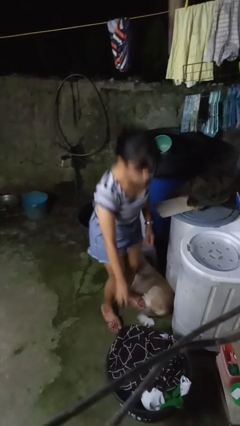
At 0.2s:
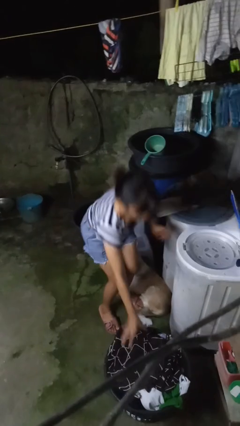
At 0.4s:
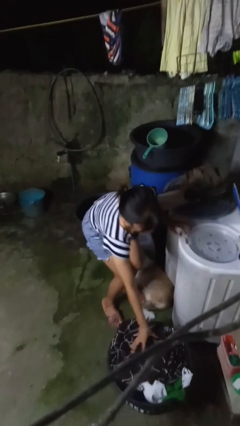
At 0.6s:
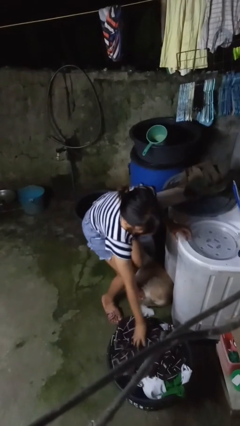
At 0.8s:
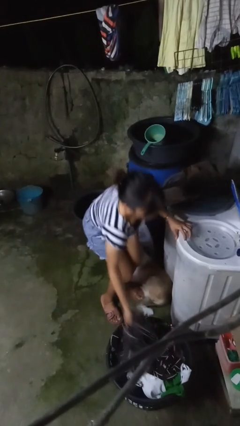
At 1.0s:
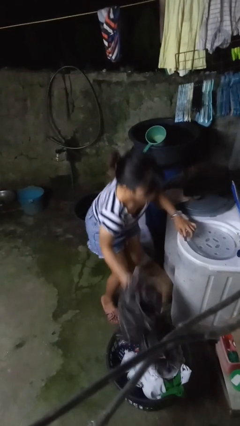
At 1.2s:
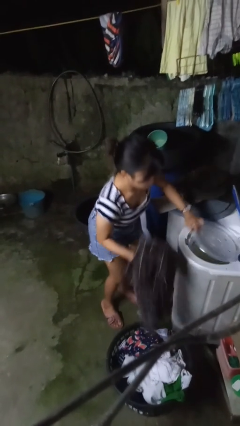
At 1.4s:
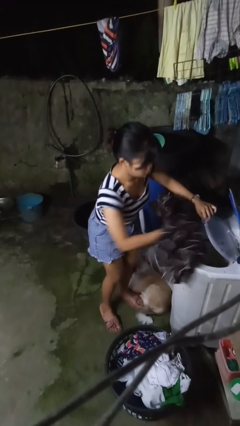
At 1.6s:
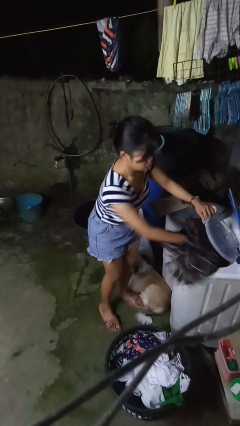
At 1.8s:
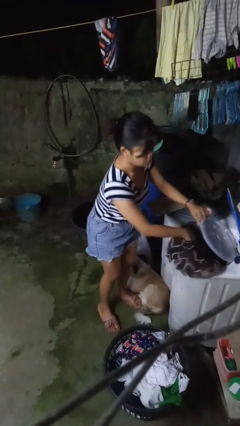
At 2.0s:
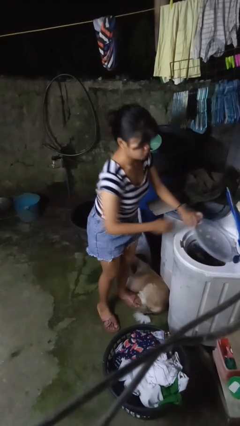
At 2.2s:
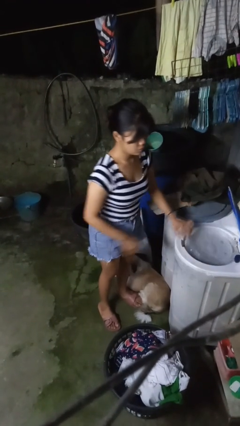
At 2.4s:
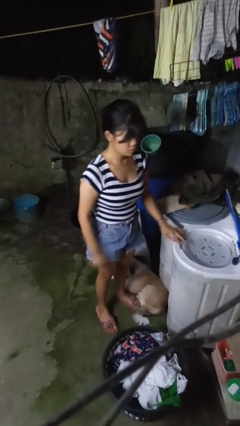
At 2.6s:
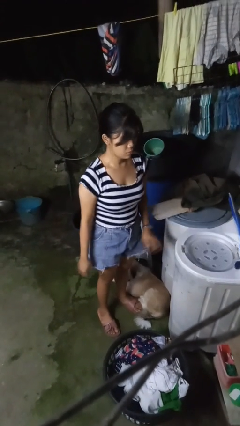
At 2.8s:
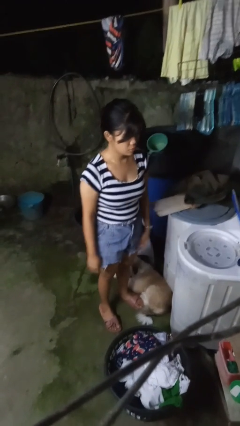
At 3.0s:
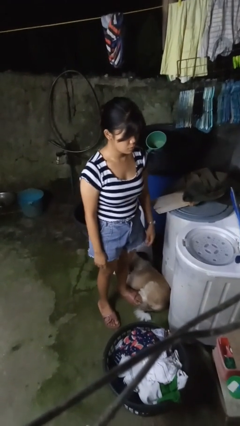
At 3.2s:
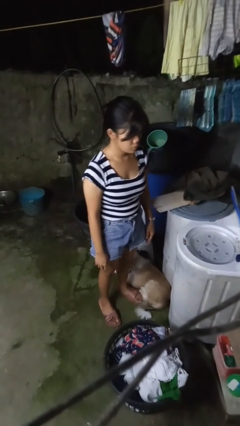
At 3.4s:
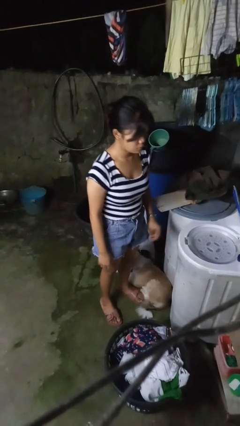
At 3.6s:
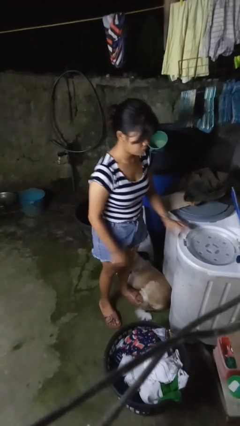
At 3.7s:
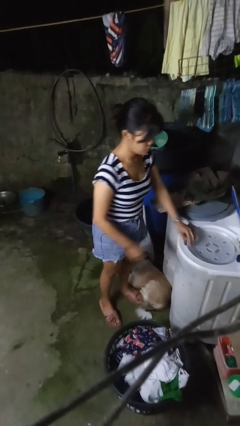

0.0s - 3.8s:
person loads dryer

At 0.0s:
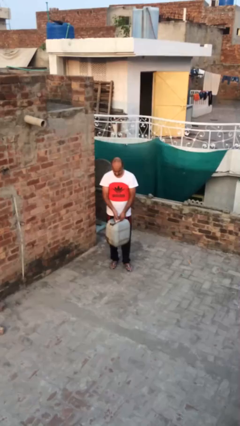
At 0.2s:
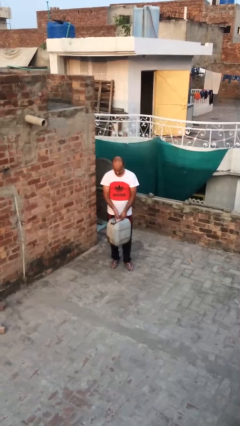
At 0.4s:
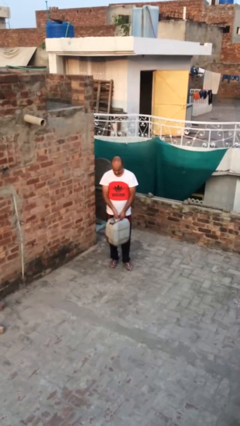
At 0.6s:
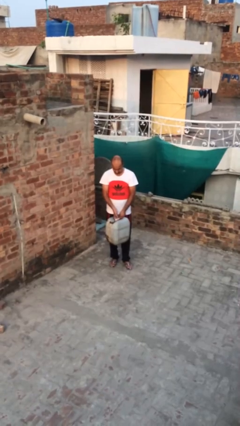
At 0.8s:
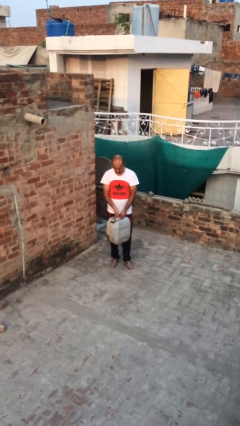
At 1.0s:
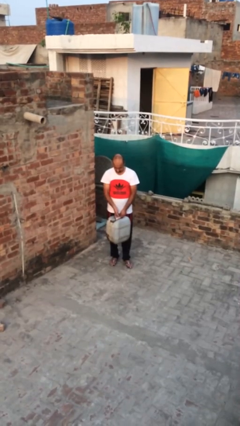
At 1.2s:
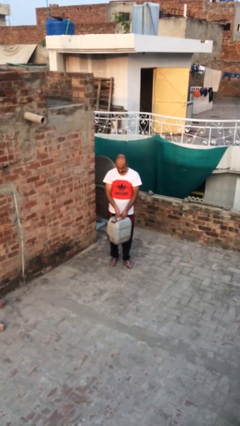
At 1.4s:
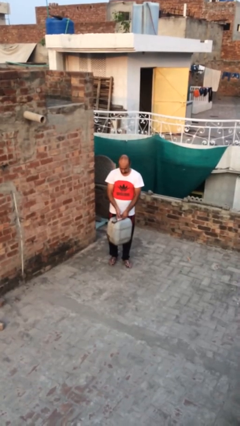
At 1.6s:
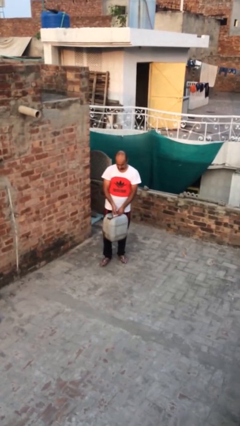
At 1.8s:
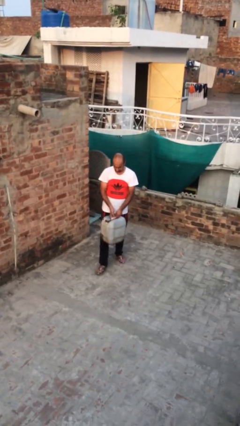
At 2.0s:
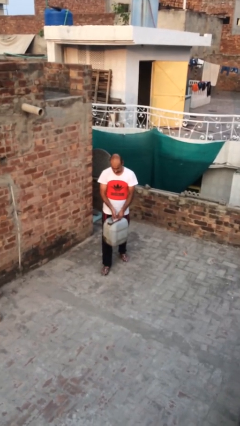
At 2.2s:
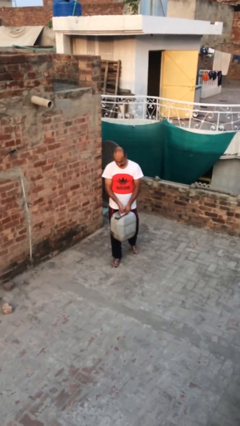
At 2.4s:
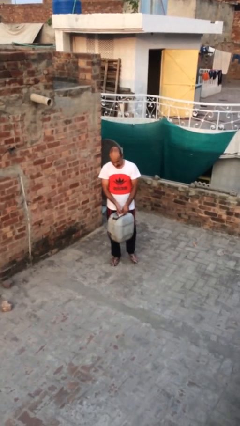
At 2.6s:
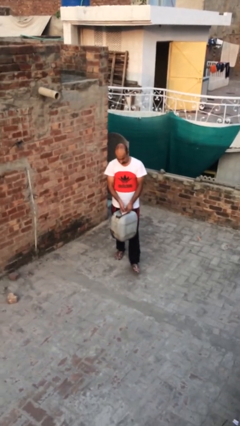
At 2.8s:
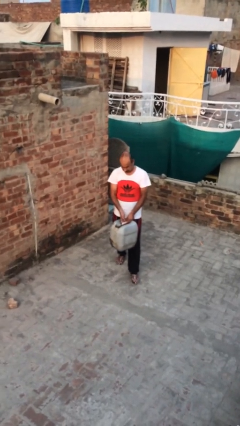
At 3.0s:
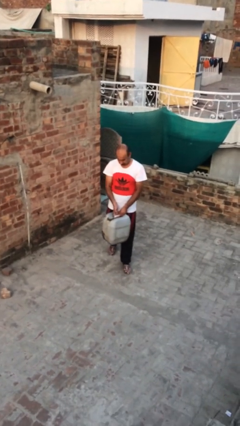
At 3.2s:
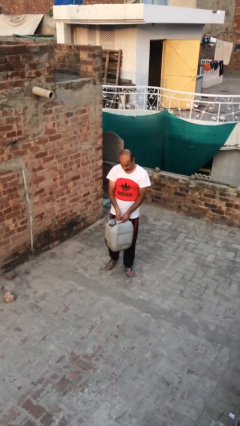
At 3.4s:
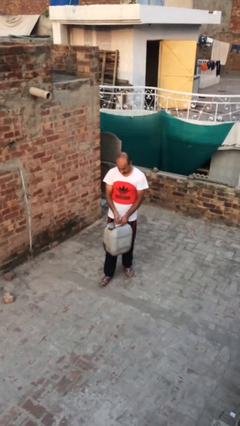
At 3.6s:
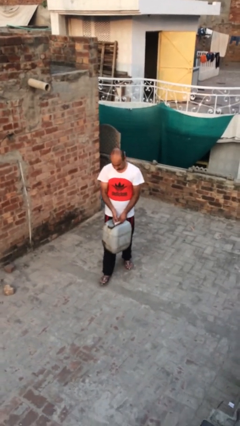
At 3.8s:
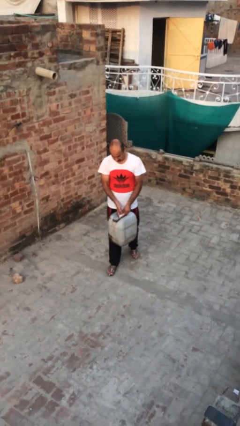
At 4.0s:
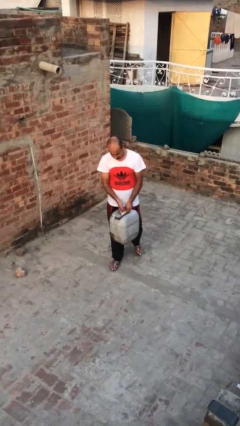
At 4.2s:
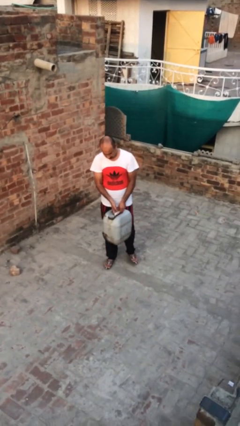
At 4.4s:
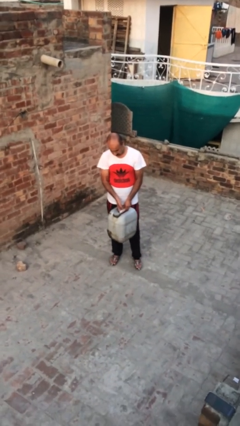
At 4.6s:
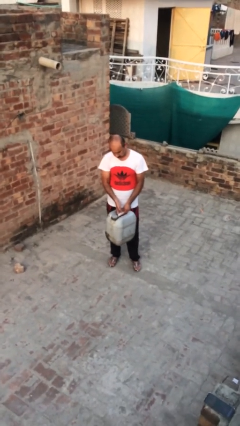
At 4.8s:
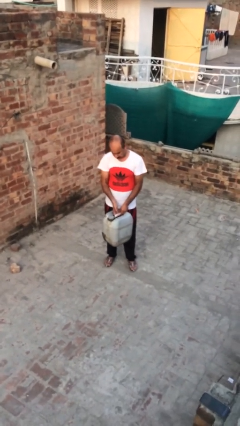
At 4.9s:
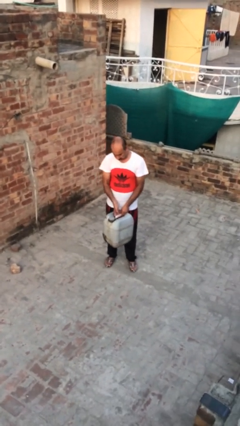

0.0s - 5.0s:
person carries heavy object

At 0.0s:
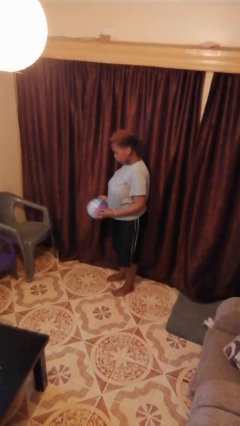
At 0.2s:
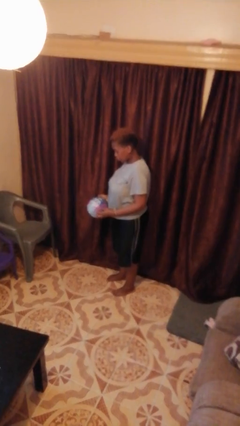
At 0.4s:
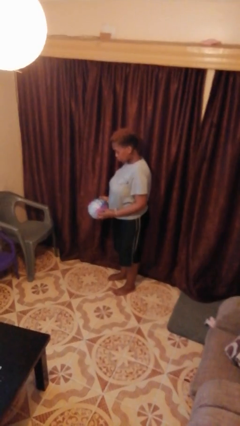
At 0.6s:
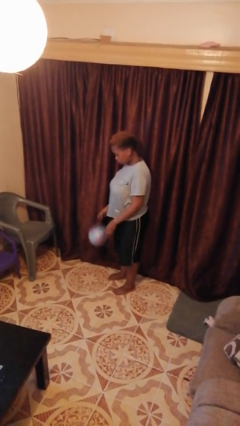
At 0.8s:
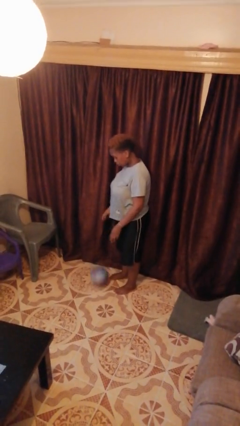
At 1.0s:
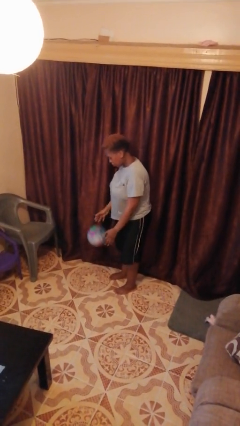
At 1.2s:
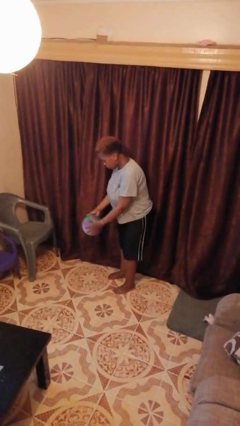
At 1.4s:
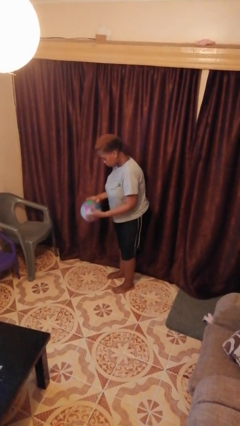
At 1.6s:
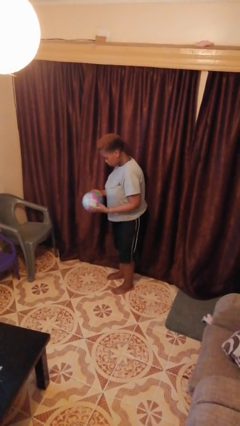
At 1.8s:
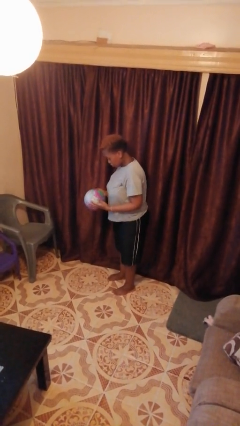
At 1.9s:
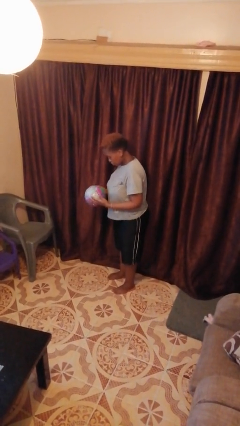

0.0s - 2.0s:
person bounces ball on floor

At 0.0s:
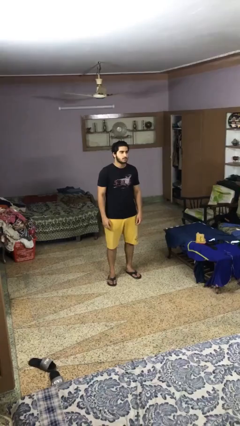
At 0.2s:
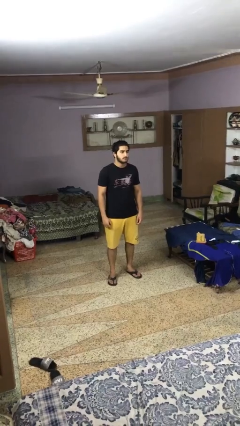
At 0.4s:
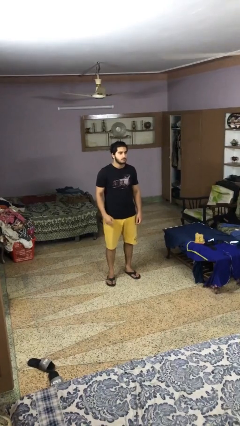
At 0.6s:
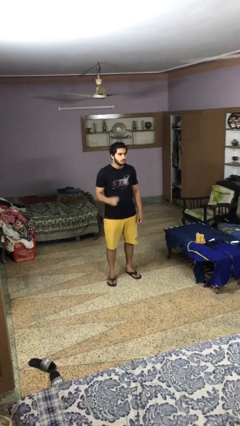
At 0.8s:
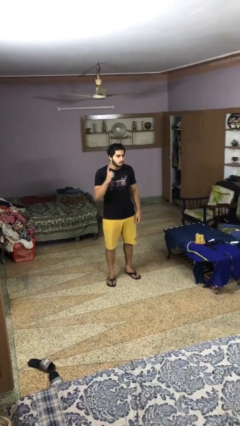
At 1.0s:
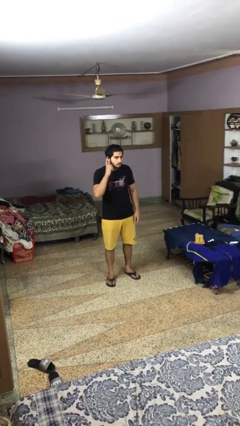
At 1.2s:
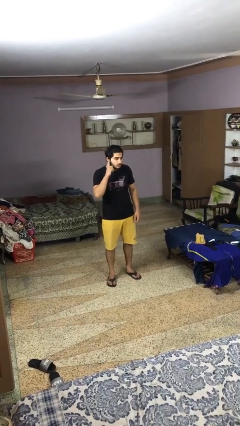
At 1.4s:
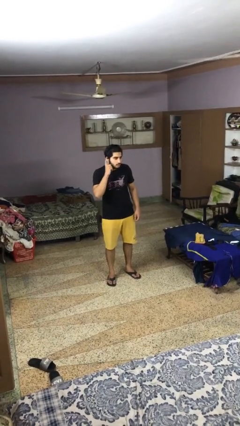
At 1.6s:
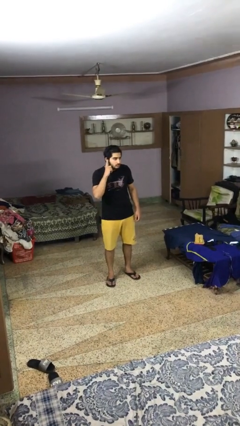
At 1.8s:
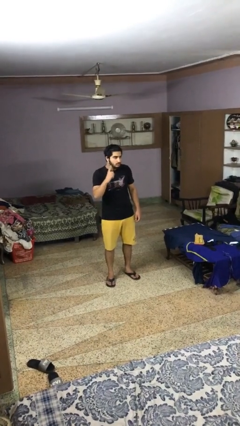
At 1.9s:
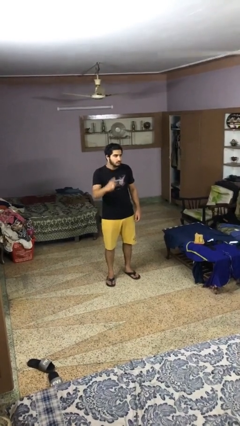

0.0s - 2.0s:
person gestures listen closely

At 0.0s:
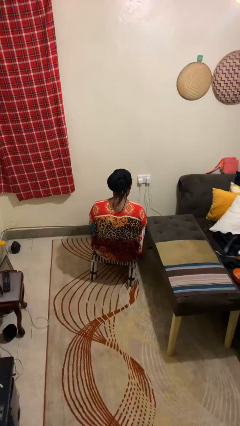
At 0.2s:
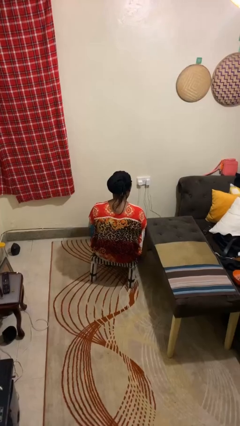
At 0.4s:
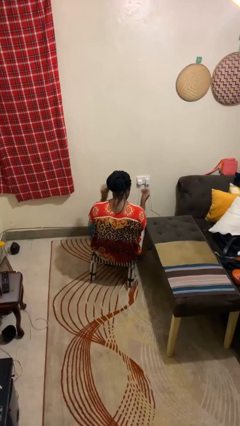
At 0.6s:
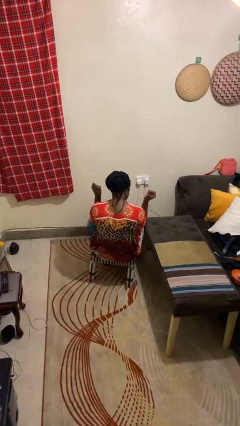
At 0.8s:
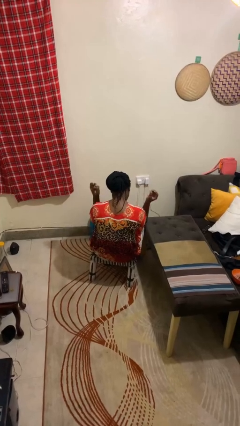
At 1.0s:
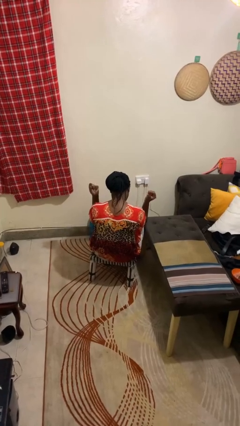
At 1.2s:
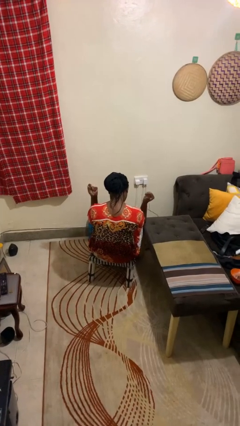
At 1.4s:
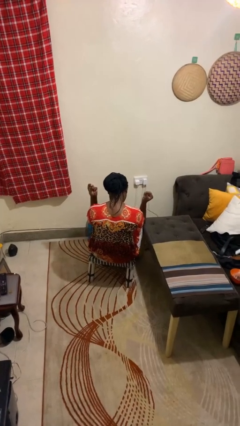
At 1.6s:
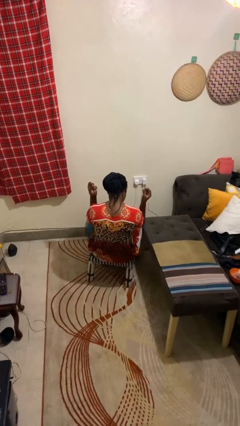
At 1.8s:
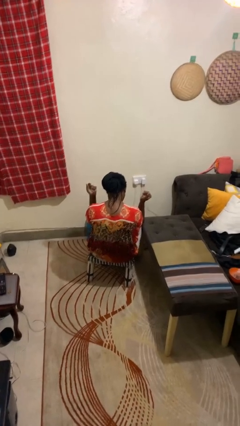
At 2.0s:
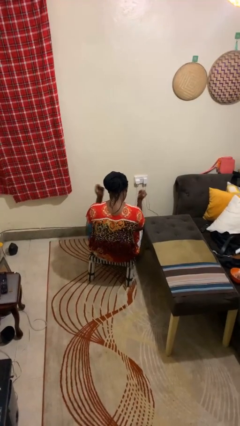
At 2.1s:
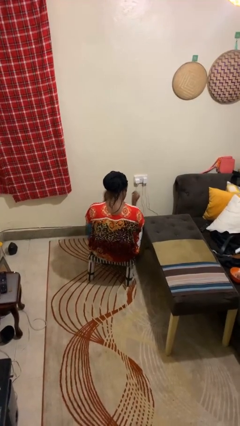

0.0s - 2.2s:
person snaps fingers

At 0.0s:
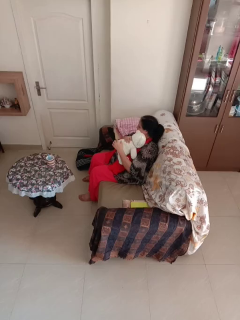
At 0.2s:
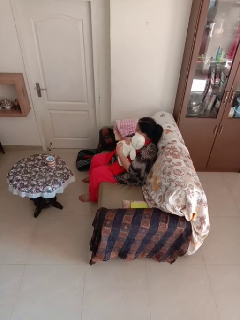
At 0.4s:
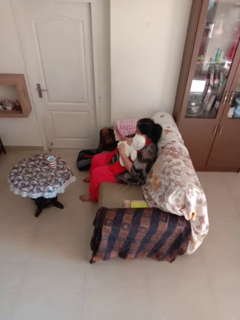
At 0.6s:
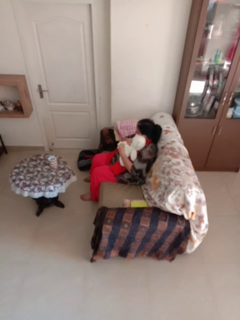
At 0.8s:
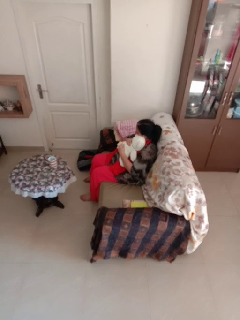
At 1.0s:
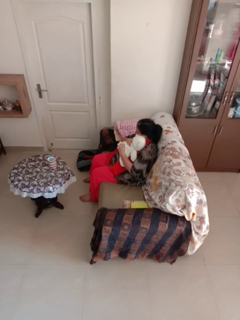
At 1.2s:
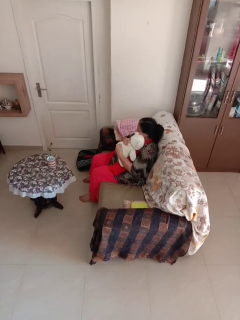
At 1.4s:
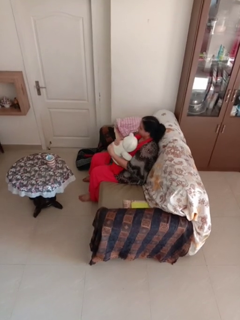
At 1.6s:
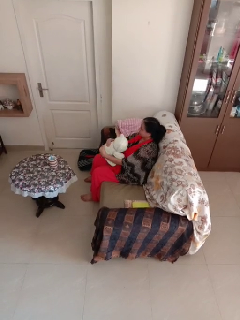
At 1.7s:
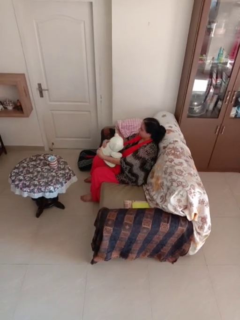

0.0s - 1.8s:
person hugs stuffed animal

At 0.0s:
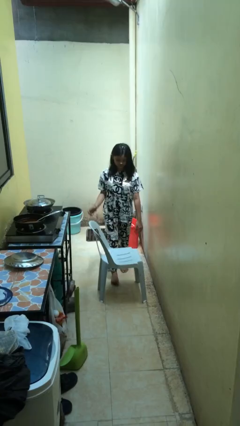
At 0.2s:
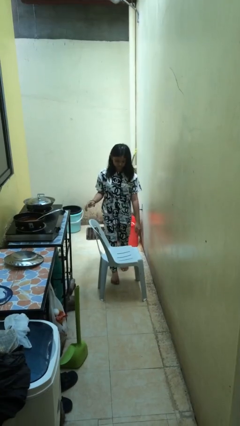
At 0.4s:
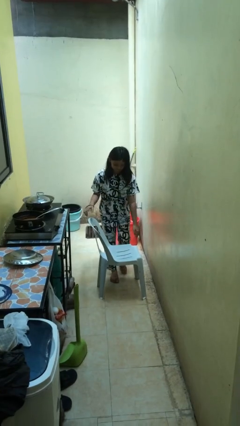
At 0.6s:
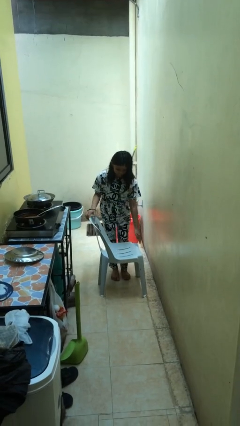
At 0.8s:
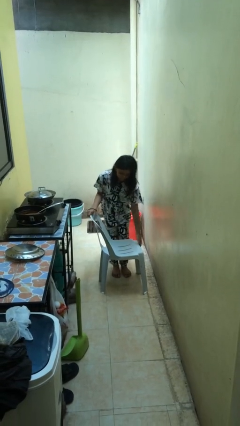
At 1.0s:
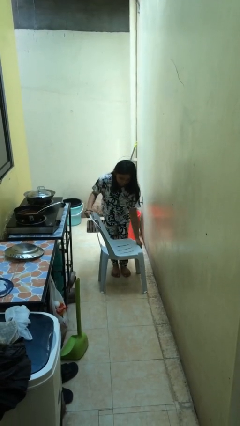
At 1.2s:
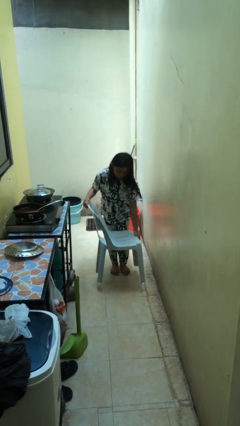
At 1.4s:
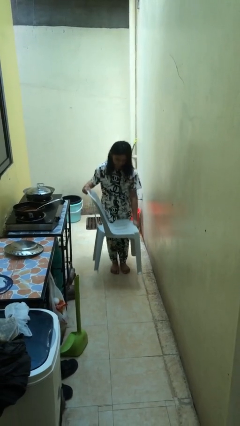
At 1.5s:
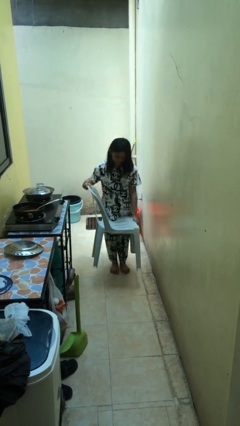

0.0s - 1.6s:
person picks up object from floor
